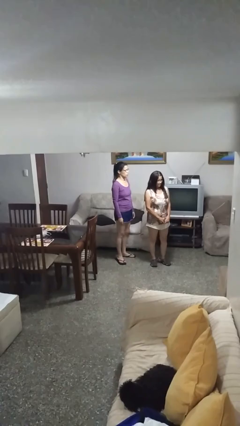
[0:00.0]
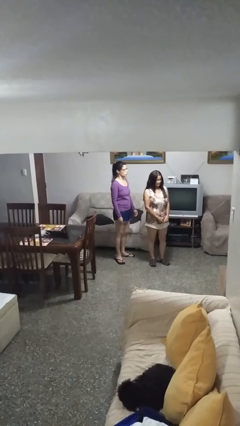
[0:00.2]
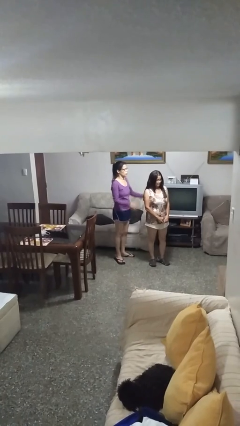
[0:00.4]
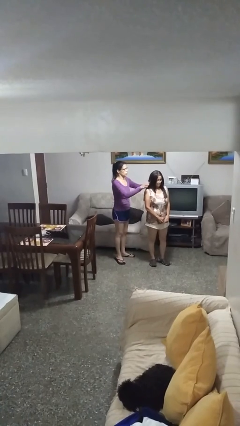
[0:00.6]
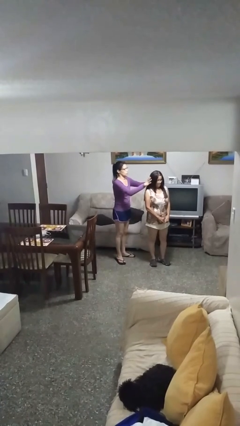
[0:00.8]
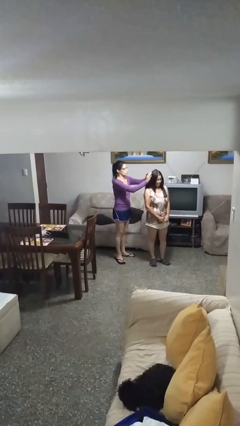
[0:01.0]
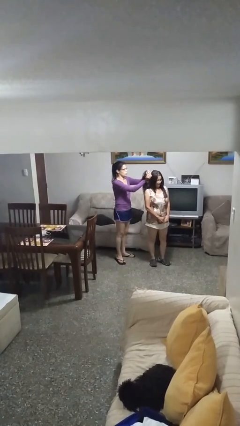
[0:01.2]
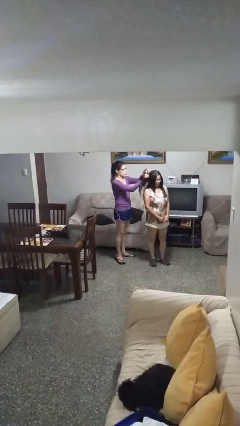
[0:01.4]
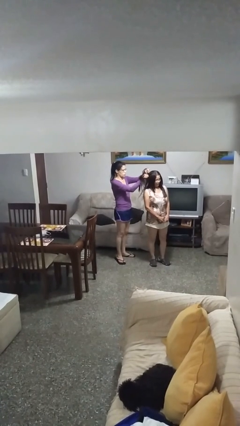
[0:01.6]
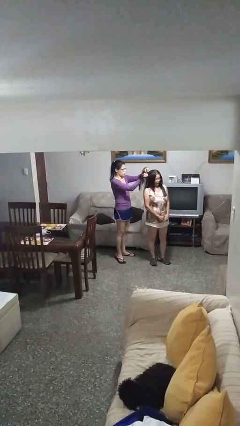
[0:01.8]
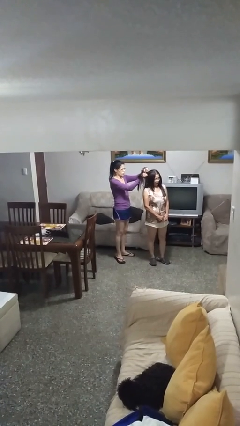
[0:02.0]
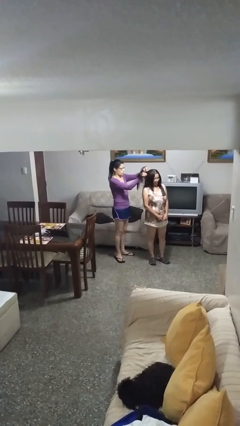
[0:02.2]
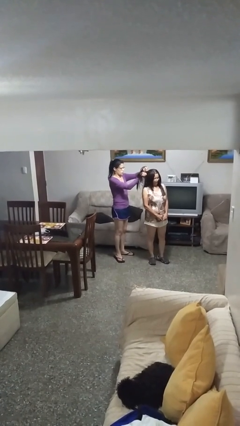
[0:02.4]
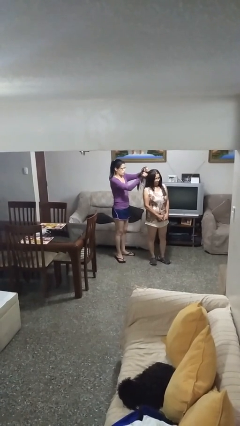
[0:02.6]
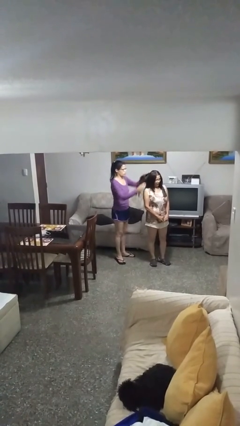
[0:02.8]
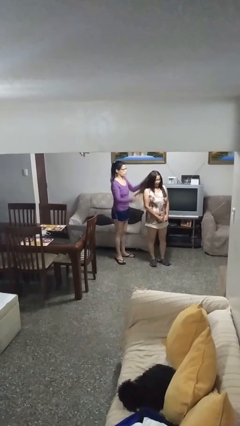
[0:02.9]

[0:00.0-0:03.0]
person grabs person by hair

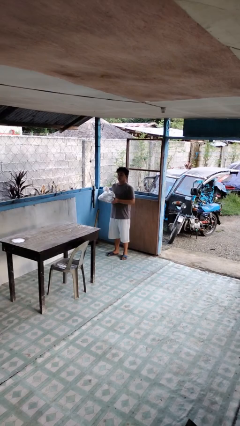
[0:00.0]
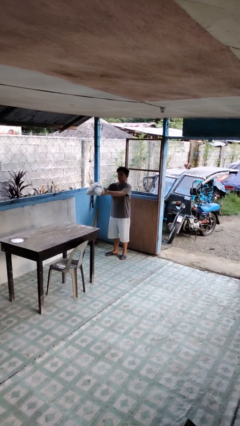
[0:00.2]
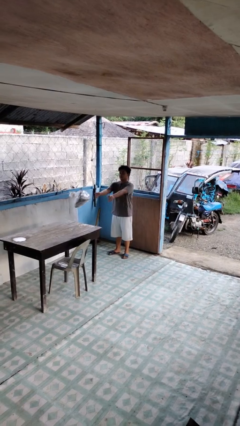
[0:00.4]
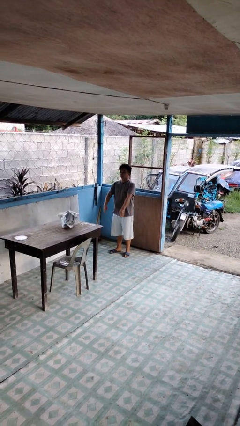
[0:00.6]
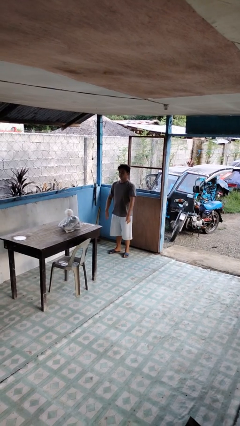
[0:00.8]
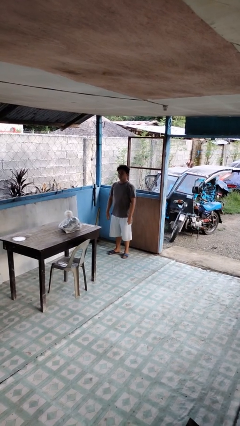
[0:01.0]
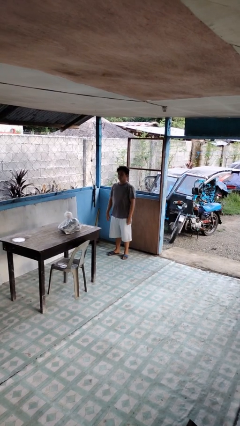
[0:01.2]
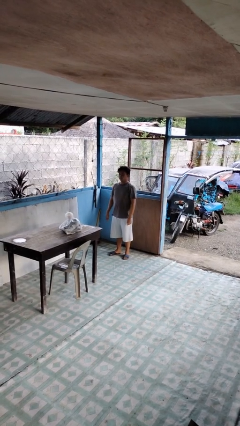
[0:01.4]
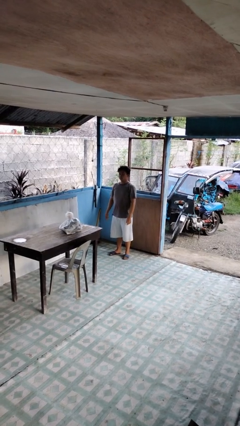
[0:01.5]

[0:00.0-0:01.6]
person throws object on table

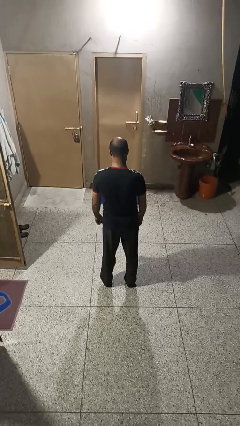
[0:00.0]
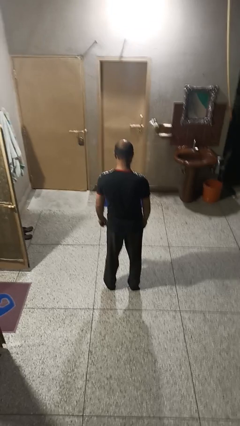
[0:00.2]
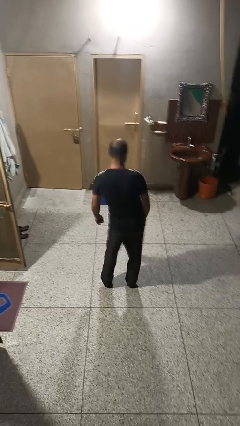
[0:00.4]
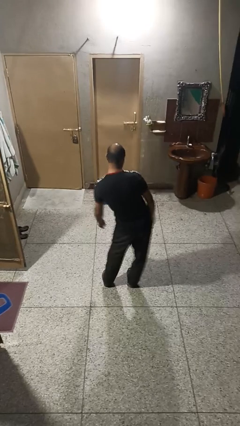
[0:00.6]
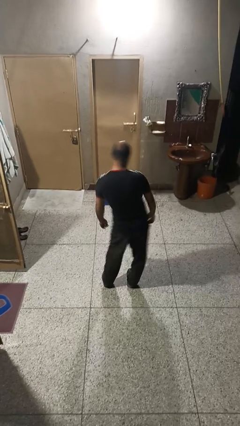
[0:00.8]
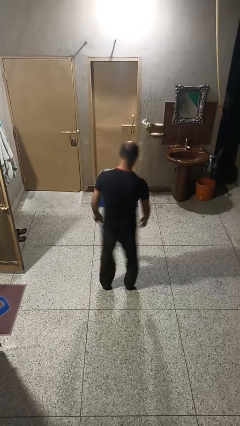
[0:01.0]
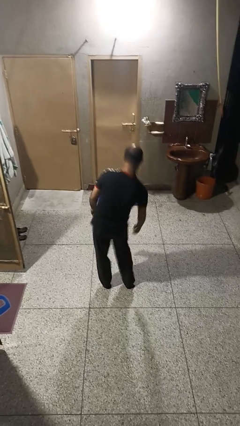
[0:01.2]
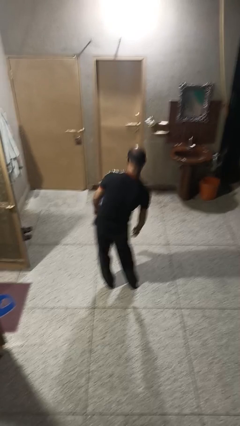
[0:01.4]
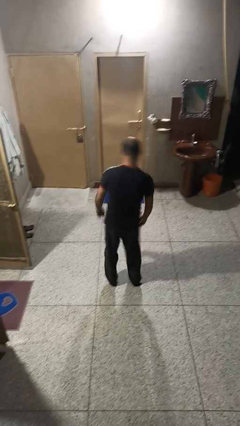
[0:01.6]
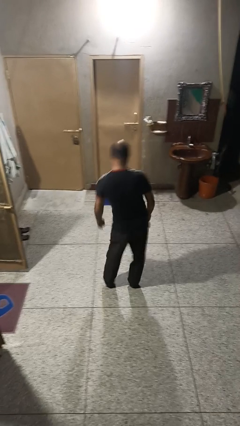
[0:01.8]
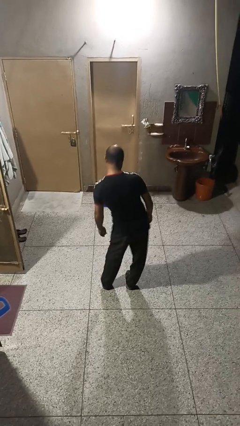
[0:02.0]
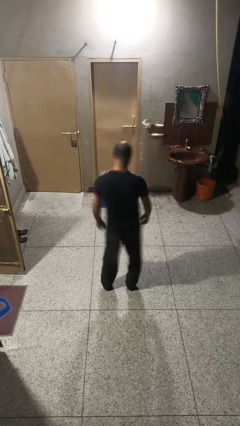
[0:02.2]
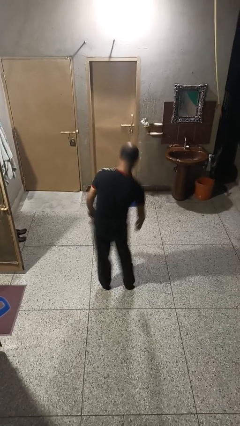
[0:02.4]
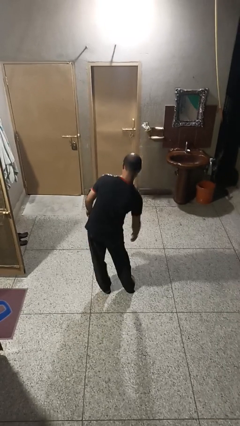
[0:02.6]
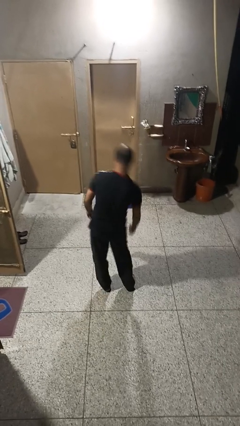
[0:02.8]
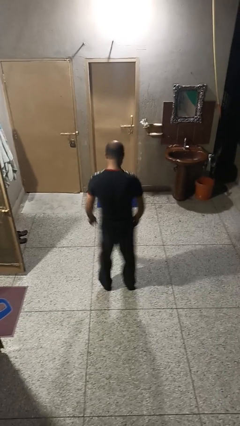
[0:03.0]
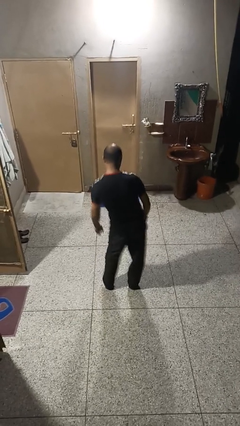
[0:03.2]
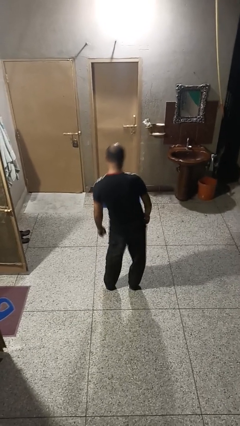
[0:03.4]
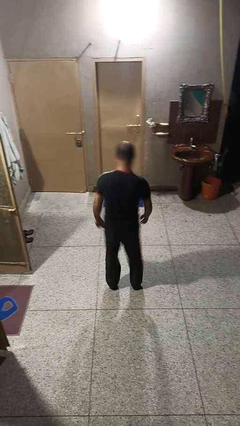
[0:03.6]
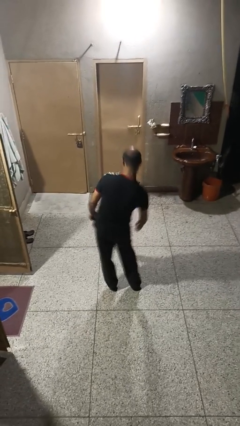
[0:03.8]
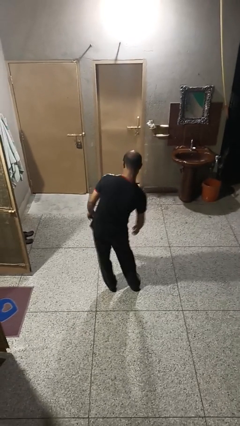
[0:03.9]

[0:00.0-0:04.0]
person wiggles hips

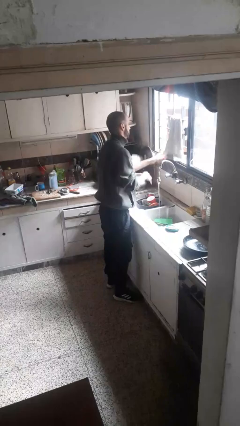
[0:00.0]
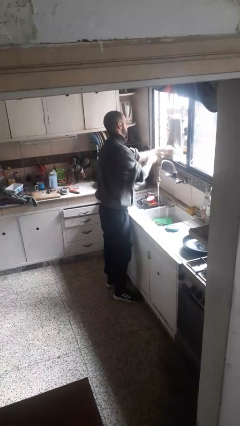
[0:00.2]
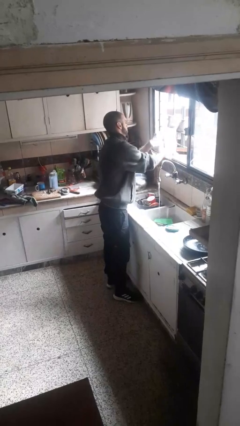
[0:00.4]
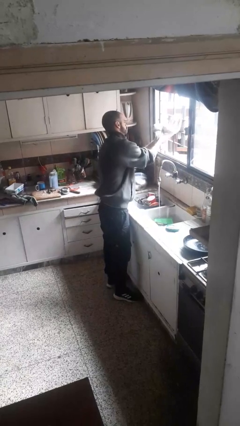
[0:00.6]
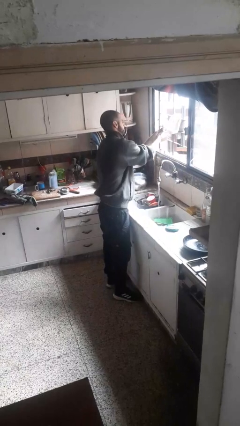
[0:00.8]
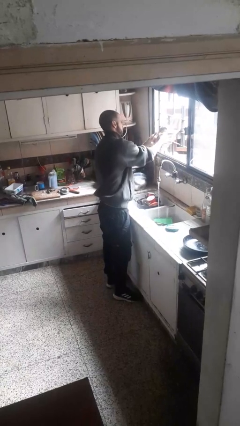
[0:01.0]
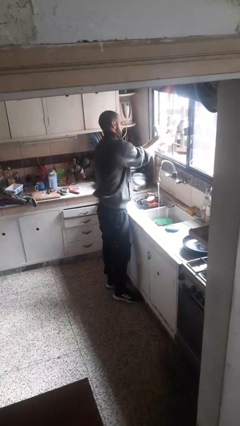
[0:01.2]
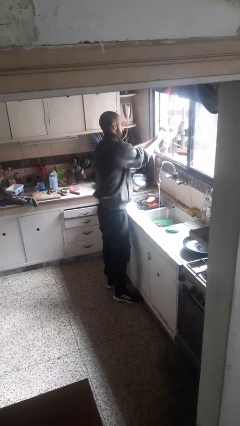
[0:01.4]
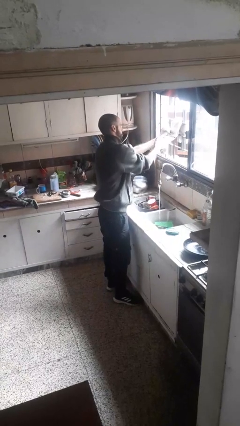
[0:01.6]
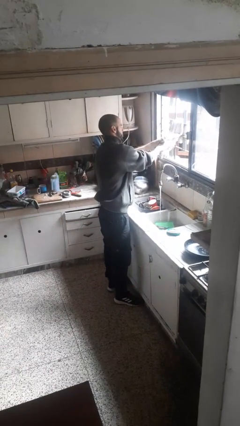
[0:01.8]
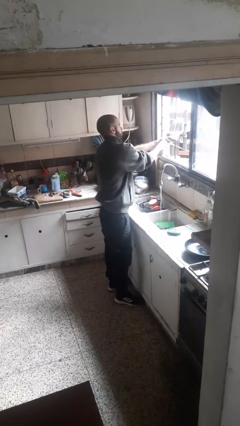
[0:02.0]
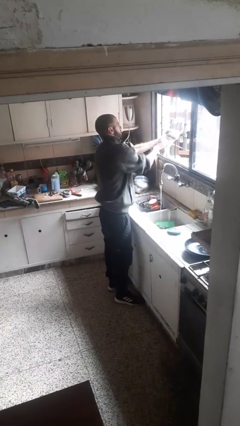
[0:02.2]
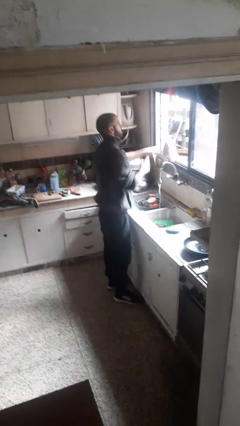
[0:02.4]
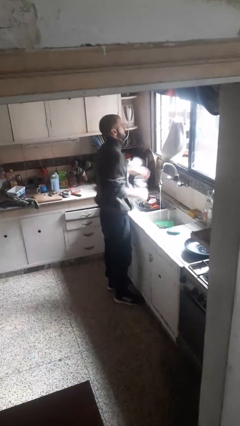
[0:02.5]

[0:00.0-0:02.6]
person dries hands with towel

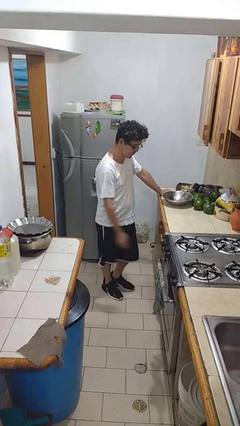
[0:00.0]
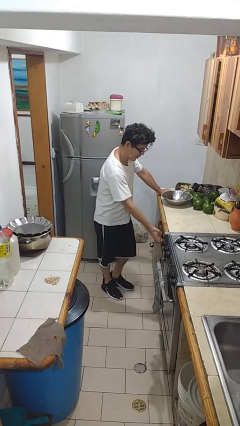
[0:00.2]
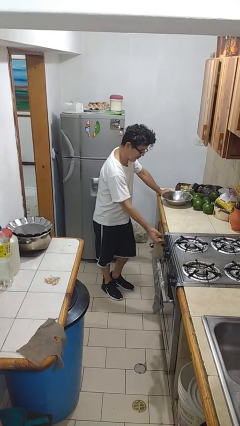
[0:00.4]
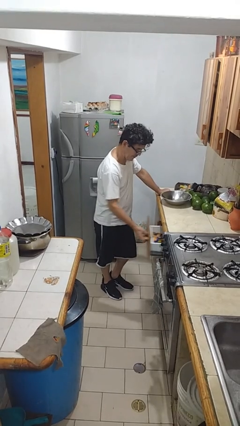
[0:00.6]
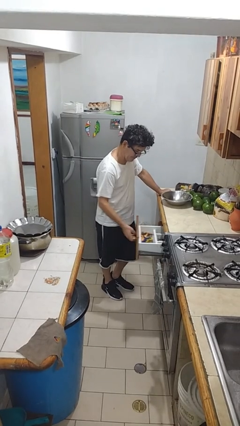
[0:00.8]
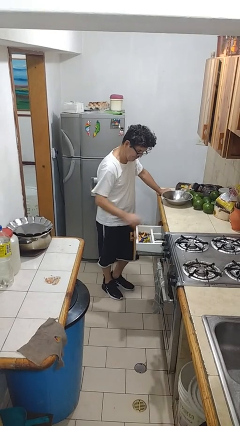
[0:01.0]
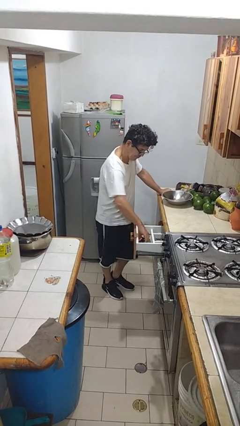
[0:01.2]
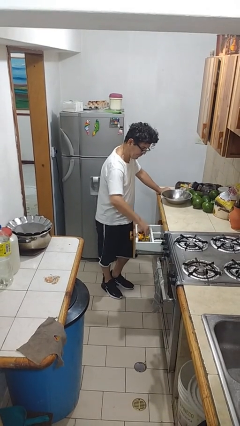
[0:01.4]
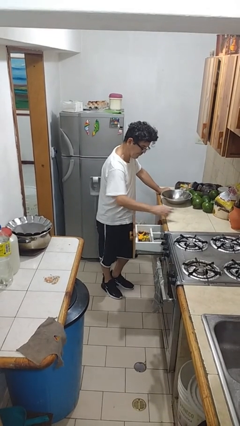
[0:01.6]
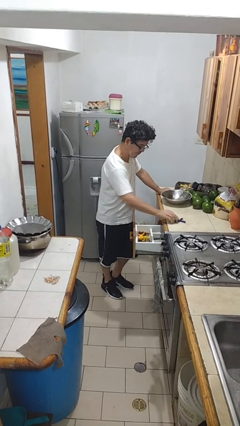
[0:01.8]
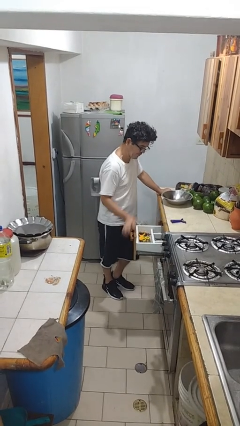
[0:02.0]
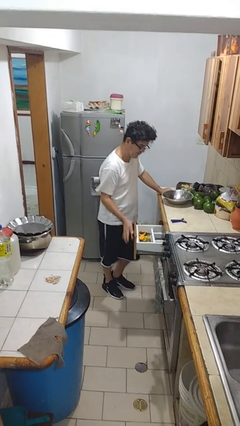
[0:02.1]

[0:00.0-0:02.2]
person takes object from kitchen drawer

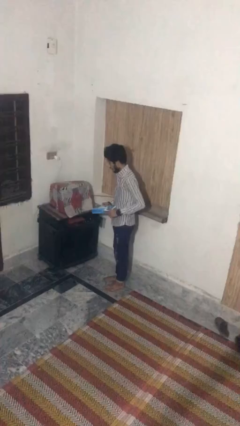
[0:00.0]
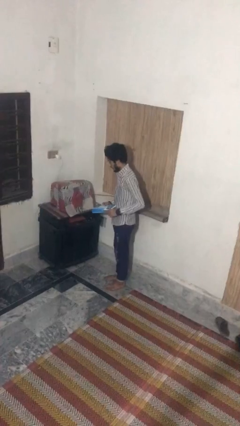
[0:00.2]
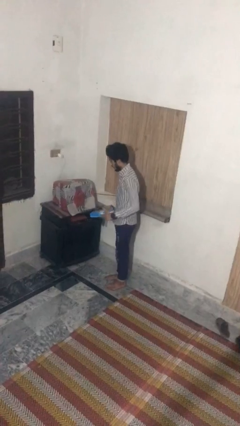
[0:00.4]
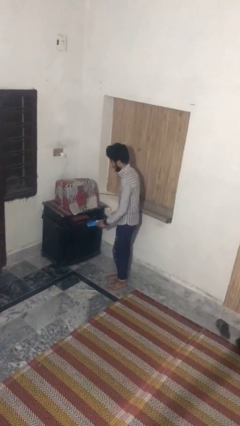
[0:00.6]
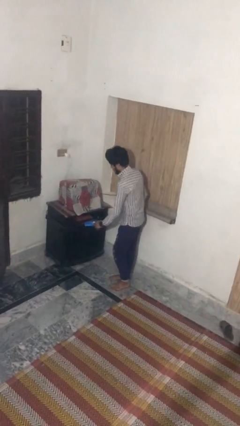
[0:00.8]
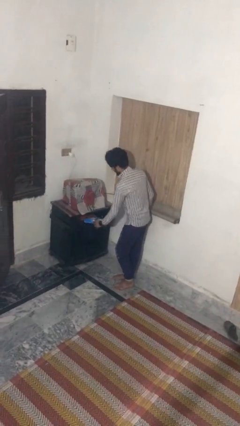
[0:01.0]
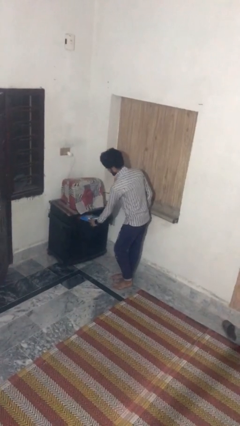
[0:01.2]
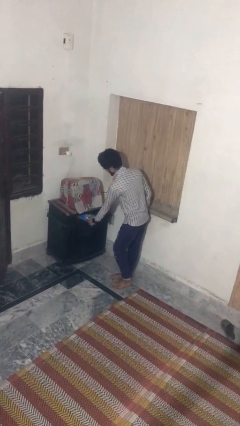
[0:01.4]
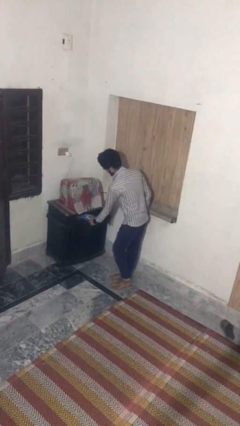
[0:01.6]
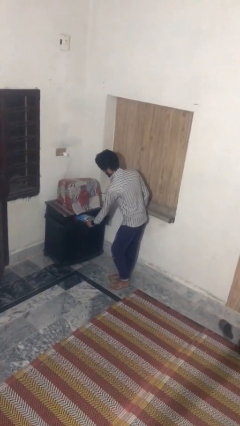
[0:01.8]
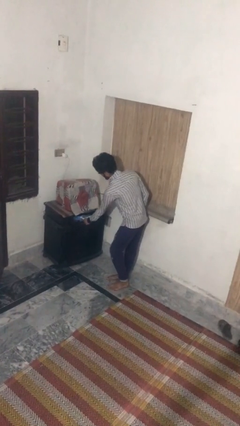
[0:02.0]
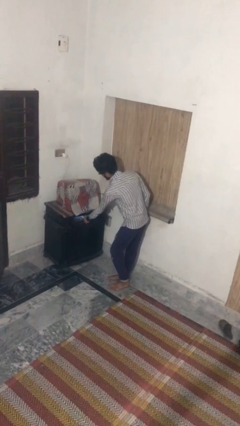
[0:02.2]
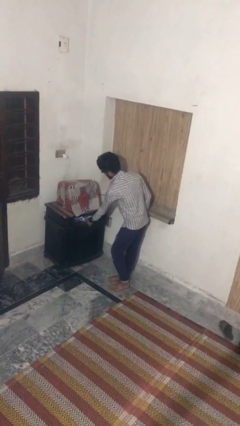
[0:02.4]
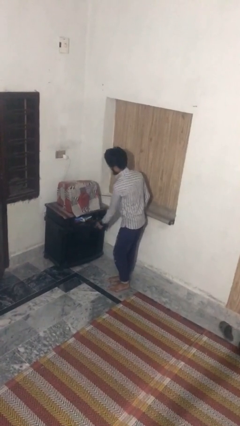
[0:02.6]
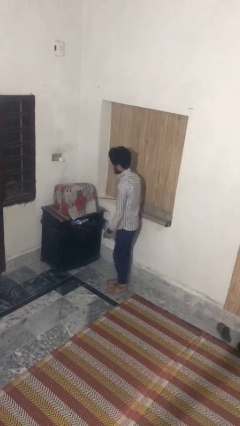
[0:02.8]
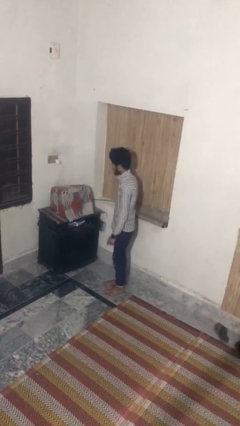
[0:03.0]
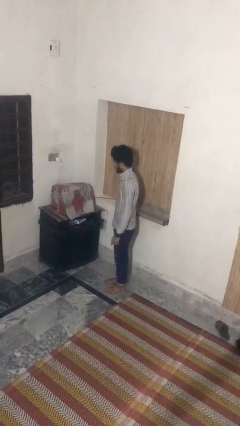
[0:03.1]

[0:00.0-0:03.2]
person puts down object into cabinet

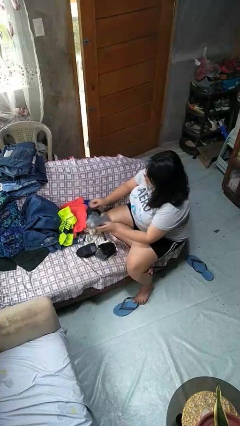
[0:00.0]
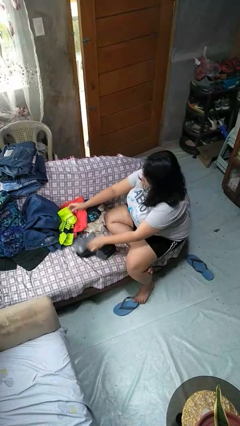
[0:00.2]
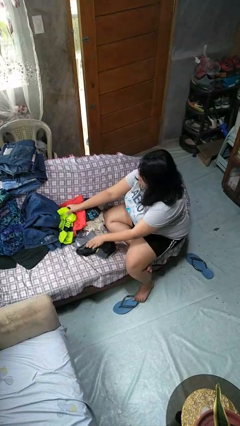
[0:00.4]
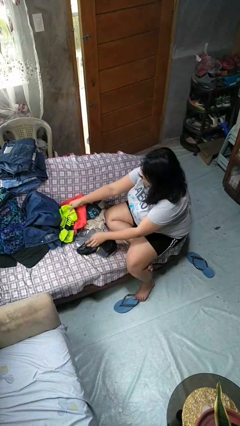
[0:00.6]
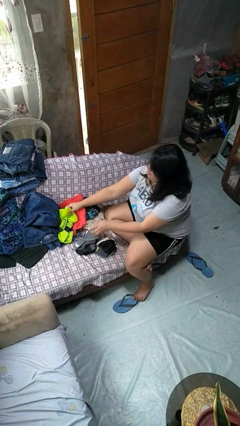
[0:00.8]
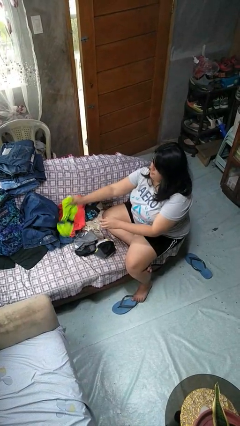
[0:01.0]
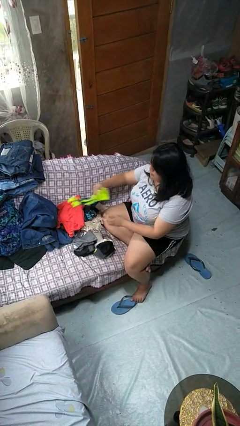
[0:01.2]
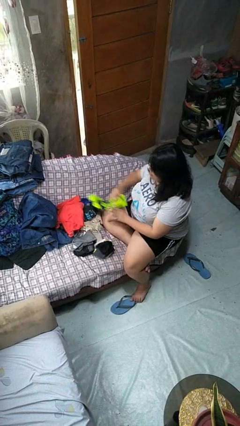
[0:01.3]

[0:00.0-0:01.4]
person folds socks
